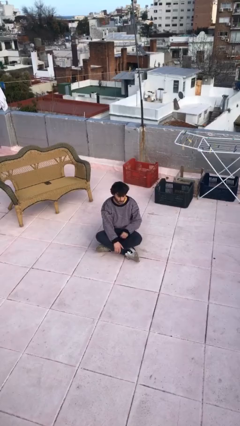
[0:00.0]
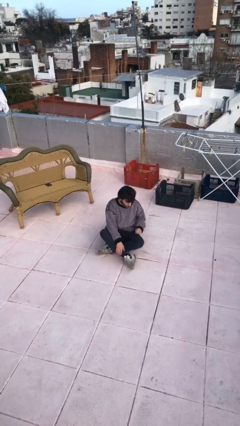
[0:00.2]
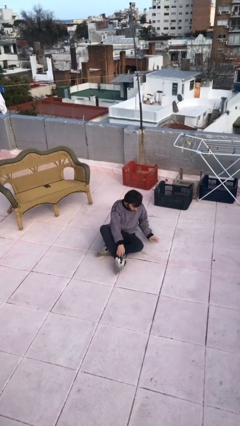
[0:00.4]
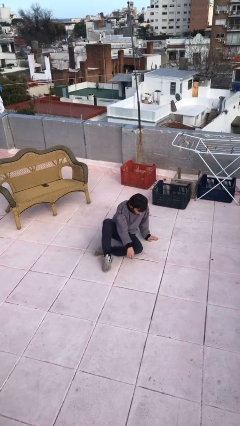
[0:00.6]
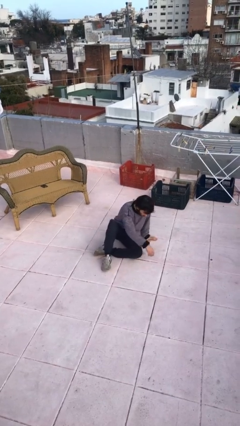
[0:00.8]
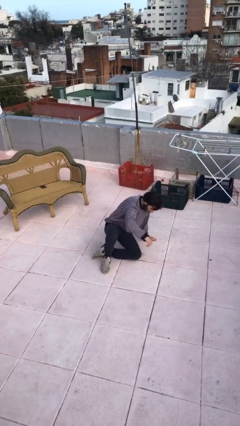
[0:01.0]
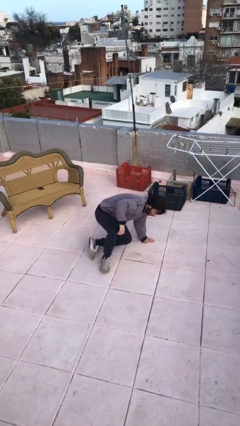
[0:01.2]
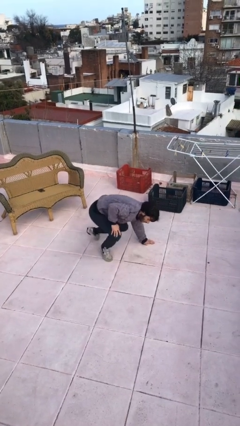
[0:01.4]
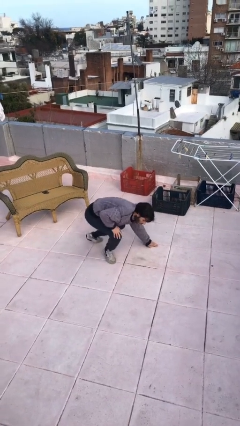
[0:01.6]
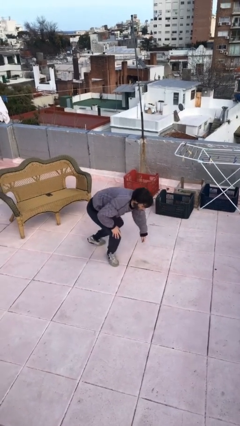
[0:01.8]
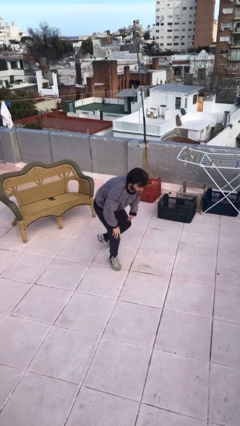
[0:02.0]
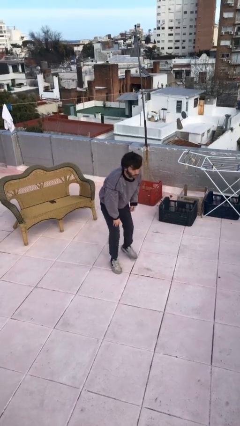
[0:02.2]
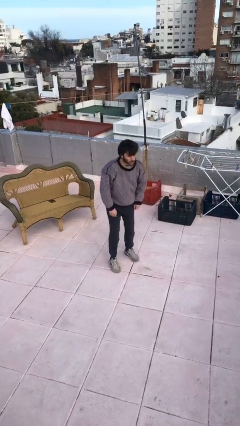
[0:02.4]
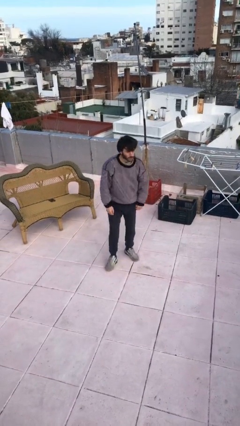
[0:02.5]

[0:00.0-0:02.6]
person stands up from floor

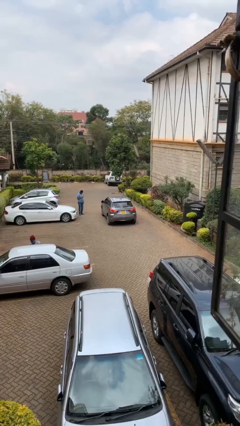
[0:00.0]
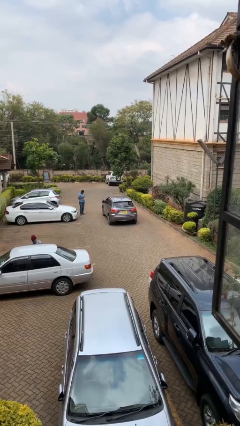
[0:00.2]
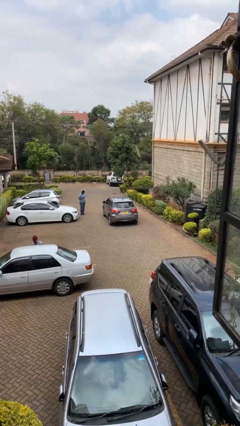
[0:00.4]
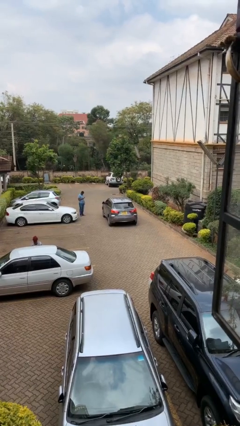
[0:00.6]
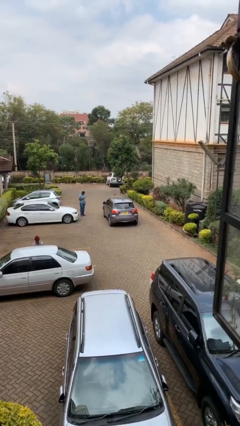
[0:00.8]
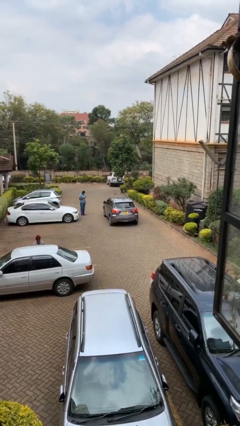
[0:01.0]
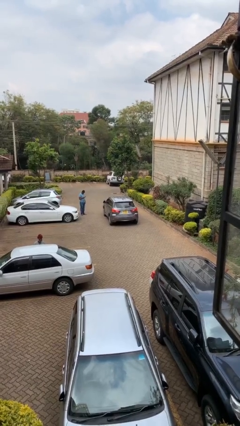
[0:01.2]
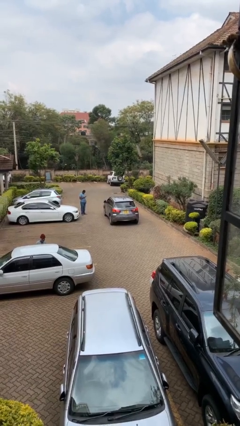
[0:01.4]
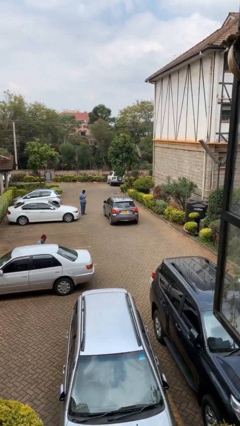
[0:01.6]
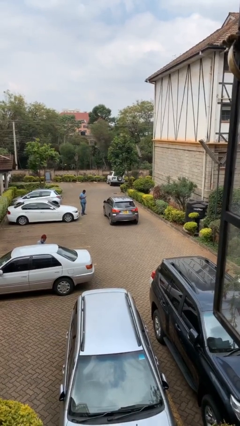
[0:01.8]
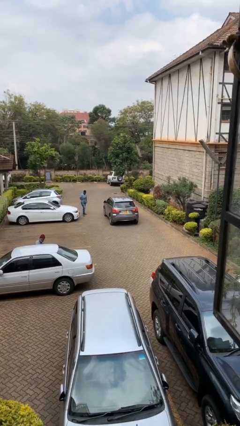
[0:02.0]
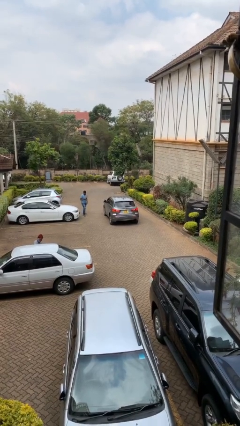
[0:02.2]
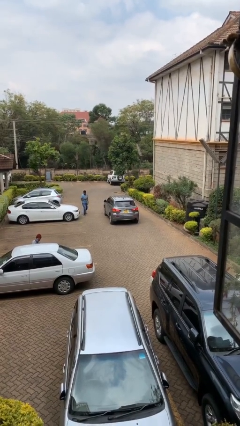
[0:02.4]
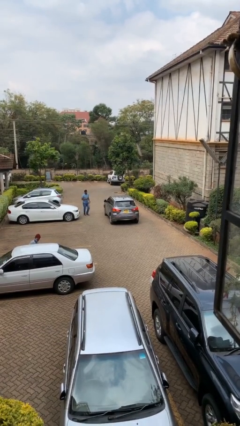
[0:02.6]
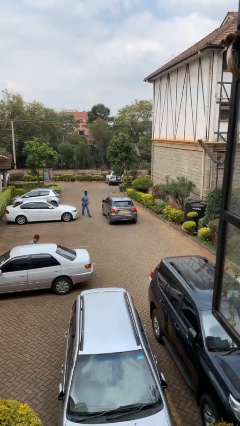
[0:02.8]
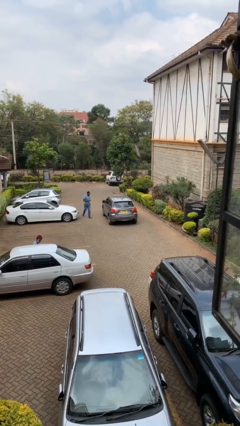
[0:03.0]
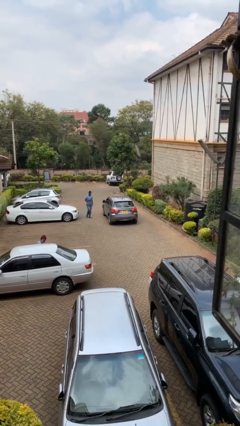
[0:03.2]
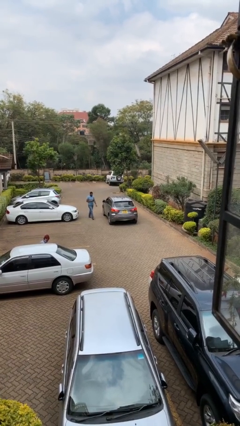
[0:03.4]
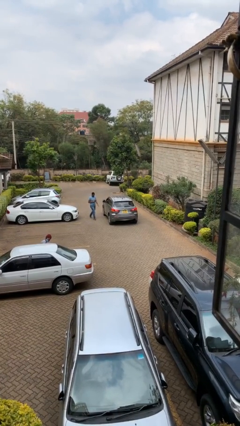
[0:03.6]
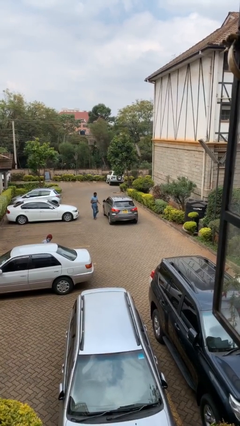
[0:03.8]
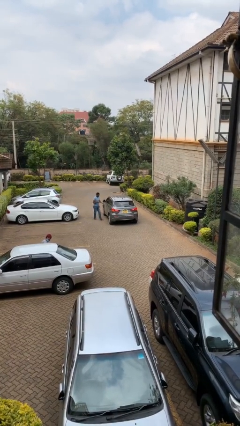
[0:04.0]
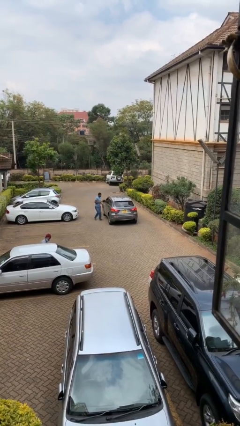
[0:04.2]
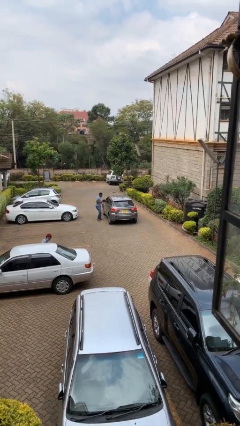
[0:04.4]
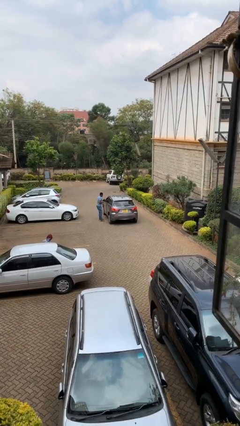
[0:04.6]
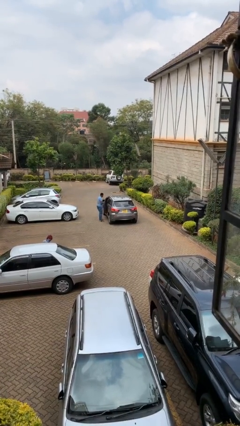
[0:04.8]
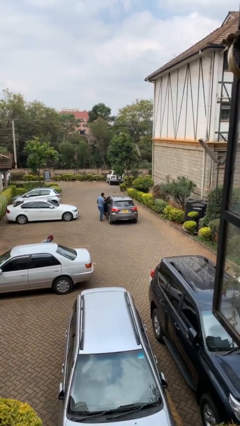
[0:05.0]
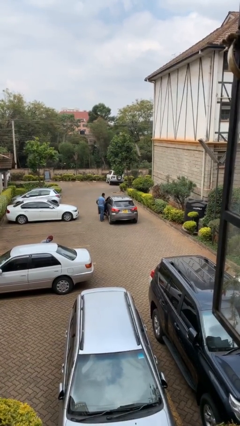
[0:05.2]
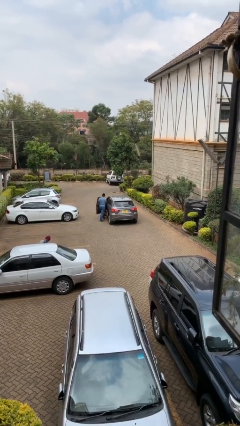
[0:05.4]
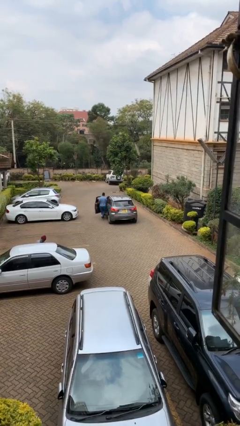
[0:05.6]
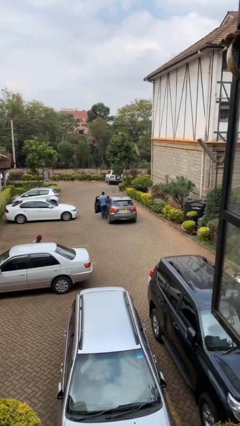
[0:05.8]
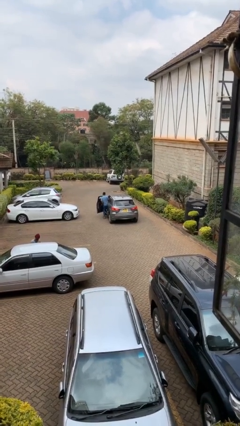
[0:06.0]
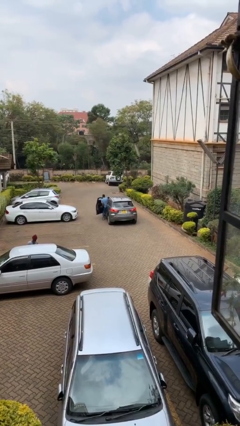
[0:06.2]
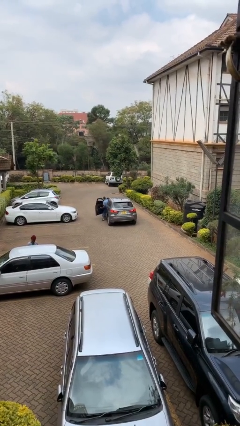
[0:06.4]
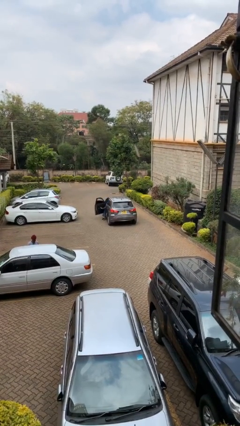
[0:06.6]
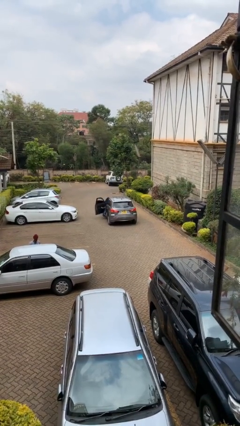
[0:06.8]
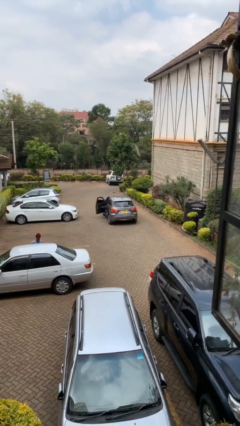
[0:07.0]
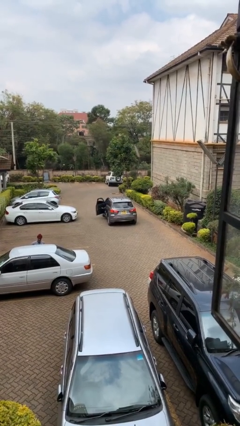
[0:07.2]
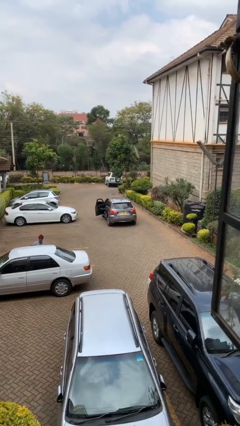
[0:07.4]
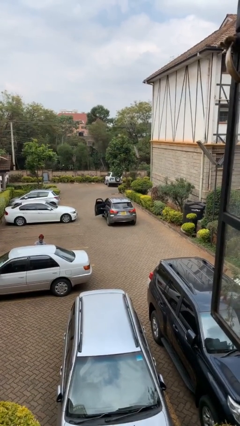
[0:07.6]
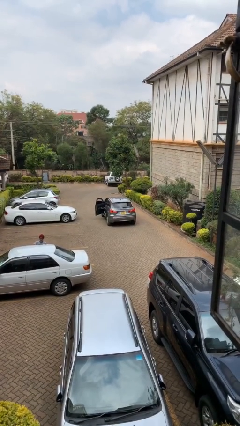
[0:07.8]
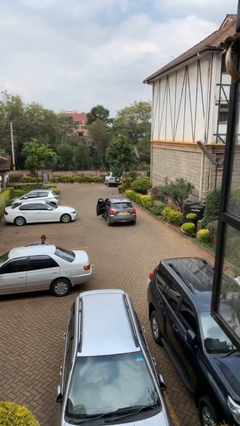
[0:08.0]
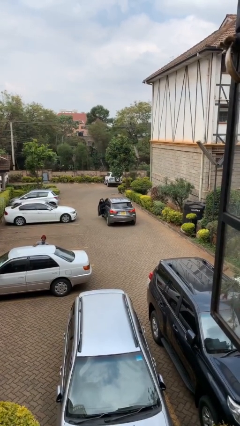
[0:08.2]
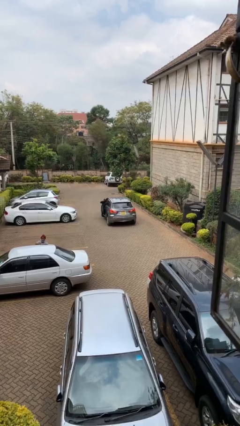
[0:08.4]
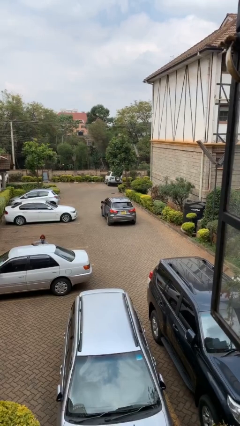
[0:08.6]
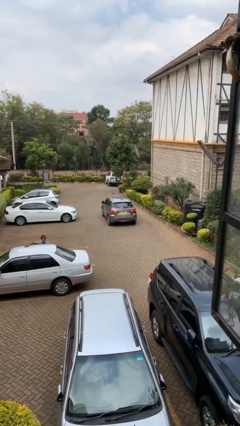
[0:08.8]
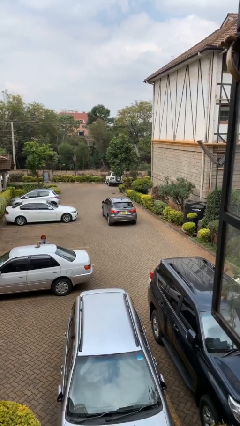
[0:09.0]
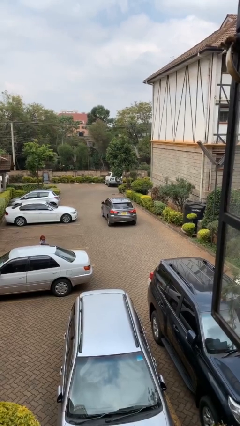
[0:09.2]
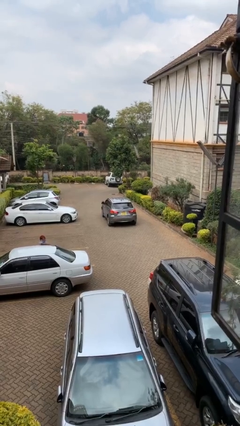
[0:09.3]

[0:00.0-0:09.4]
car picks up person

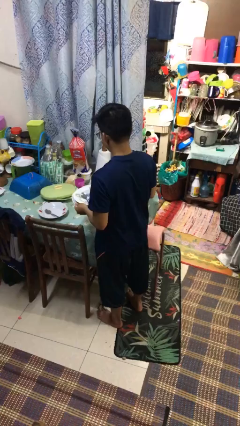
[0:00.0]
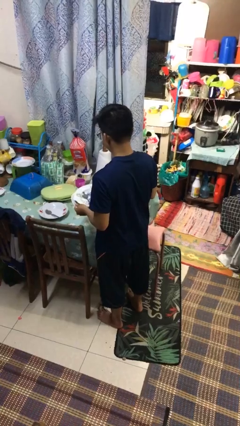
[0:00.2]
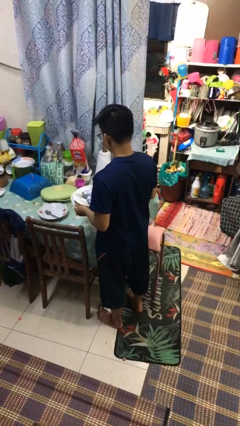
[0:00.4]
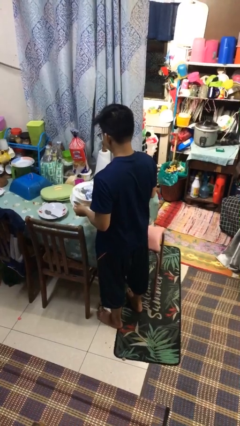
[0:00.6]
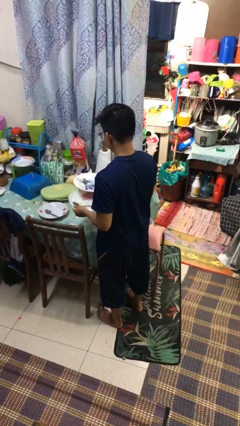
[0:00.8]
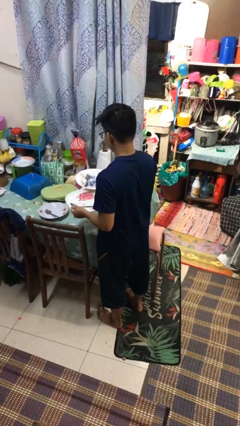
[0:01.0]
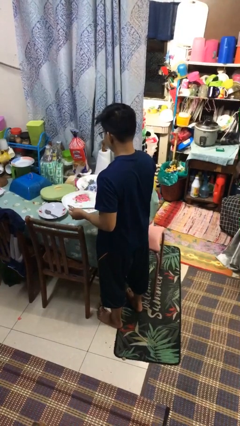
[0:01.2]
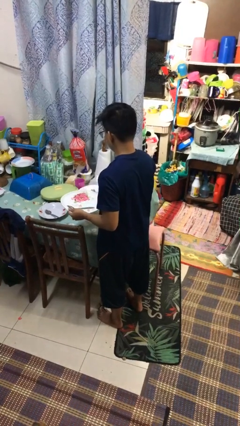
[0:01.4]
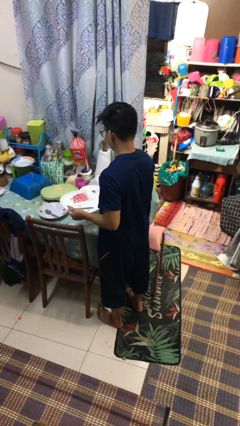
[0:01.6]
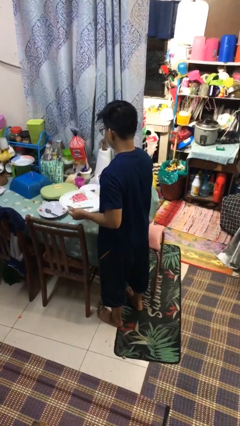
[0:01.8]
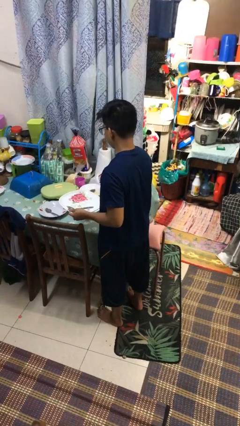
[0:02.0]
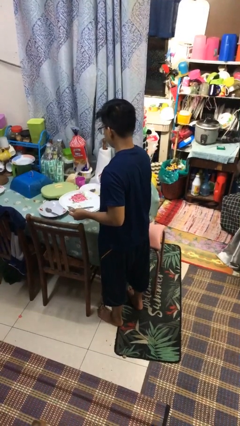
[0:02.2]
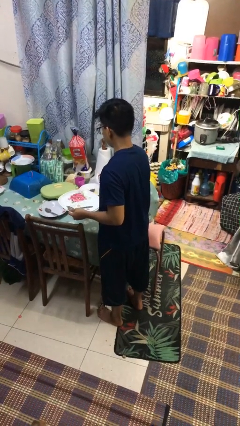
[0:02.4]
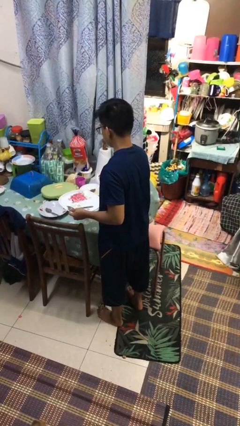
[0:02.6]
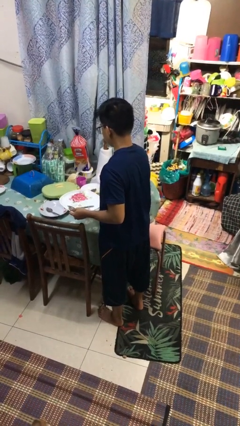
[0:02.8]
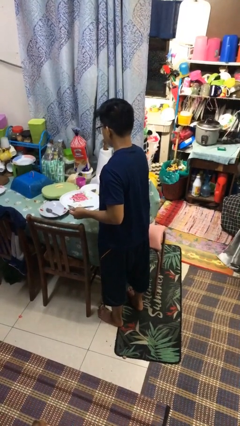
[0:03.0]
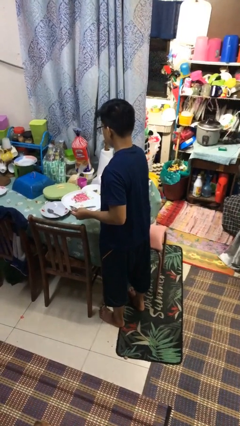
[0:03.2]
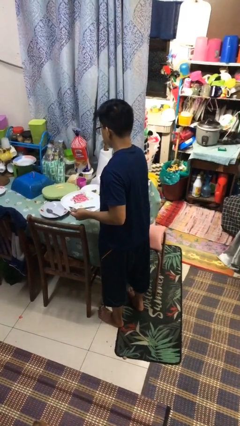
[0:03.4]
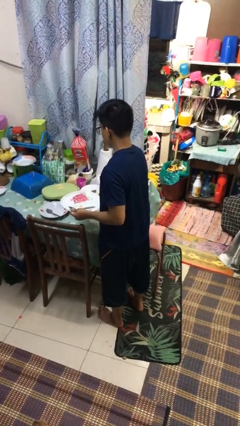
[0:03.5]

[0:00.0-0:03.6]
person sets table

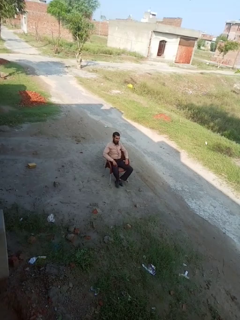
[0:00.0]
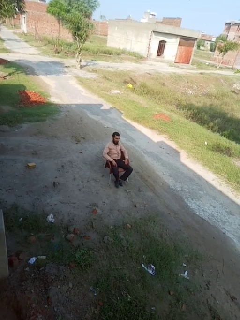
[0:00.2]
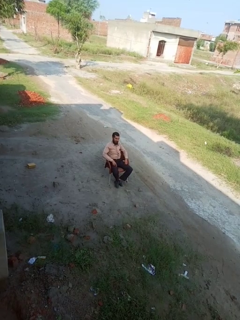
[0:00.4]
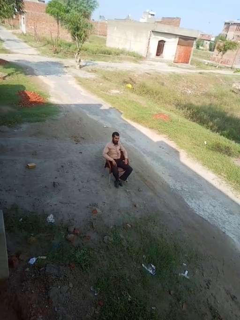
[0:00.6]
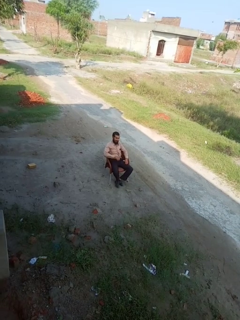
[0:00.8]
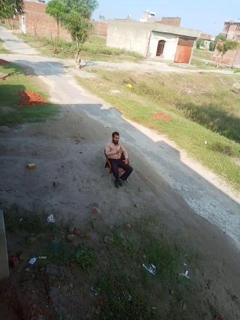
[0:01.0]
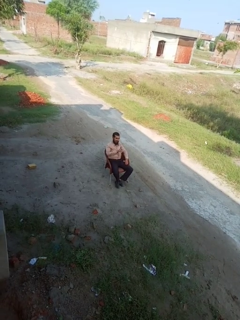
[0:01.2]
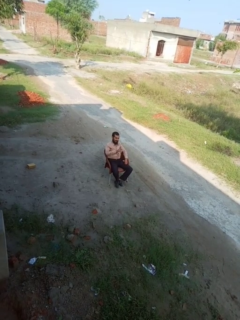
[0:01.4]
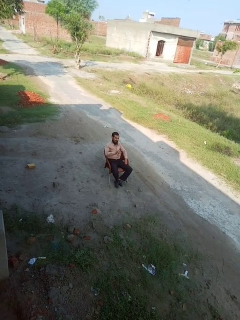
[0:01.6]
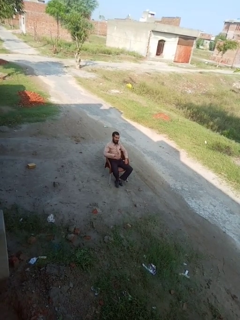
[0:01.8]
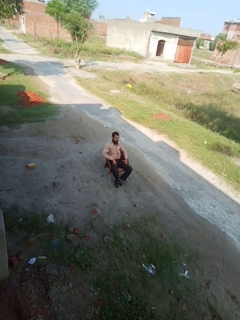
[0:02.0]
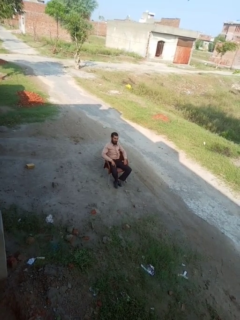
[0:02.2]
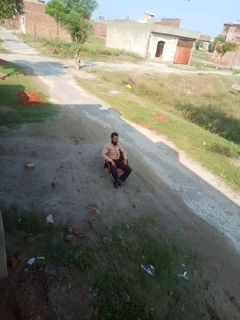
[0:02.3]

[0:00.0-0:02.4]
person gestures number one

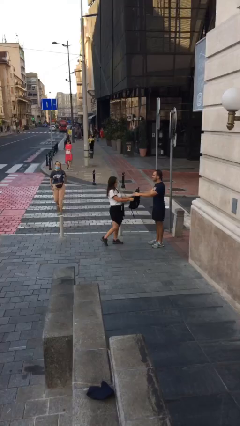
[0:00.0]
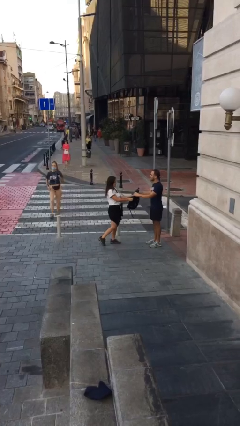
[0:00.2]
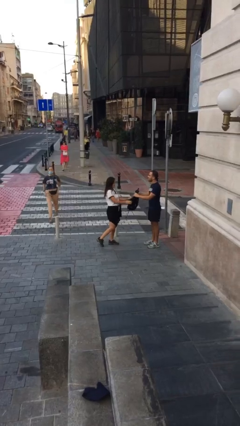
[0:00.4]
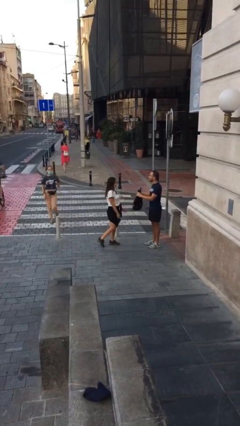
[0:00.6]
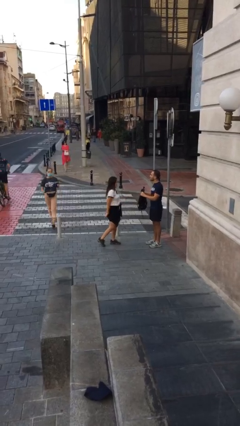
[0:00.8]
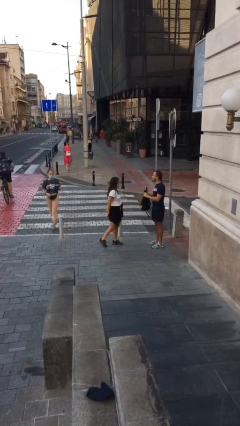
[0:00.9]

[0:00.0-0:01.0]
person transfers object to person
